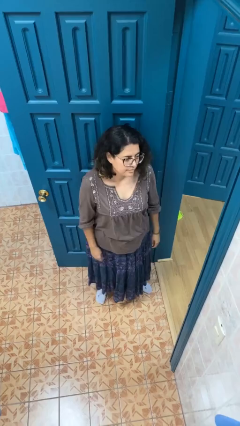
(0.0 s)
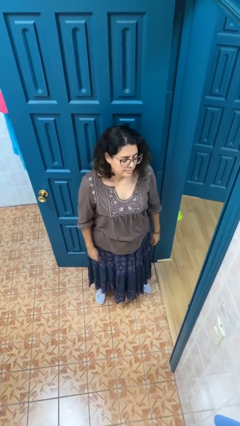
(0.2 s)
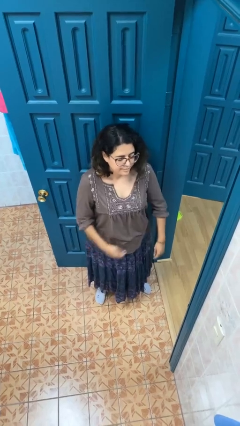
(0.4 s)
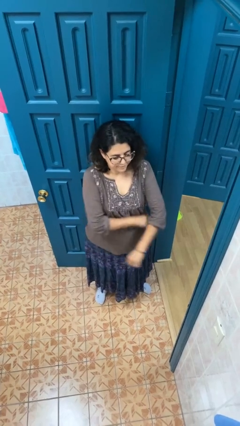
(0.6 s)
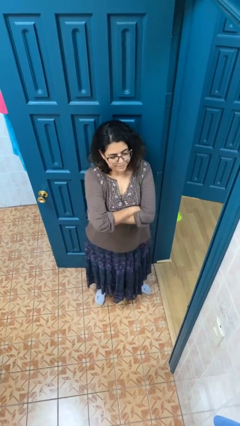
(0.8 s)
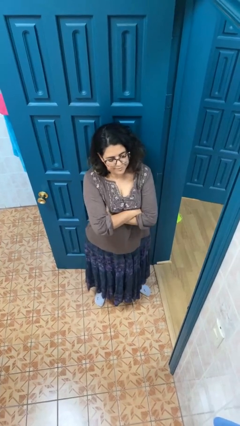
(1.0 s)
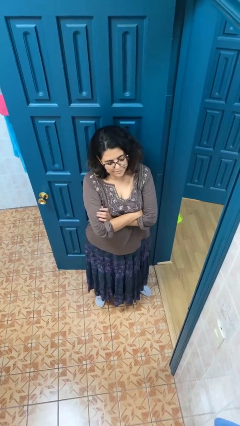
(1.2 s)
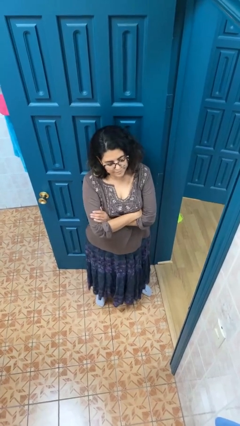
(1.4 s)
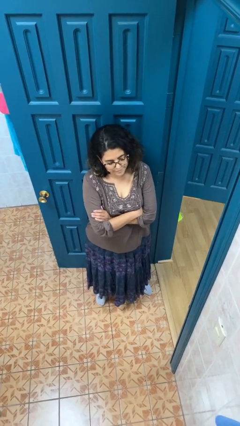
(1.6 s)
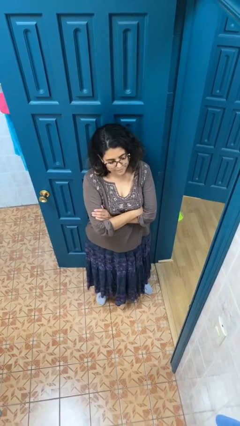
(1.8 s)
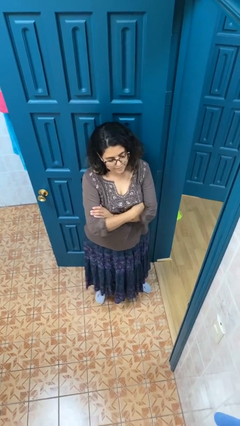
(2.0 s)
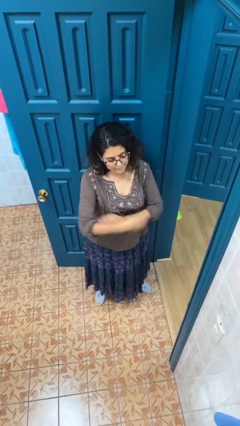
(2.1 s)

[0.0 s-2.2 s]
person crosses arms

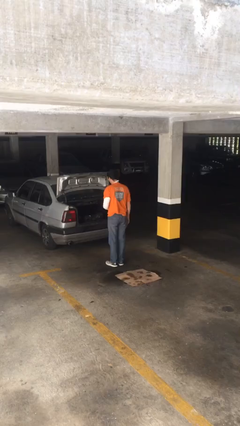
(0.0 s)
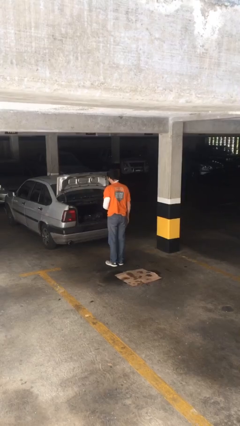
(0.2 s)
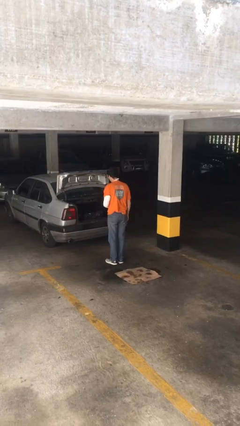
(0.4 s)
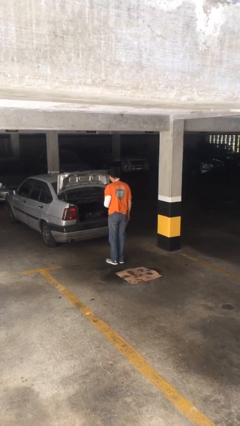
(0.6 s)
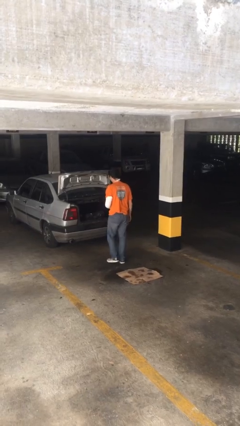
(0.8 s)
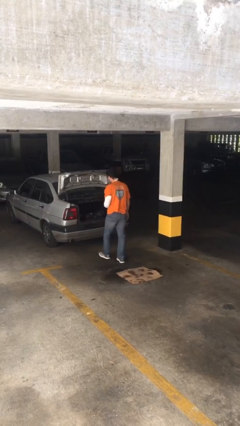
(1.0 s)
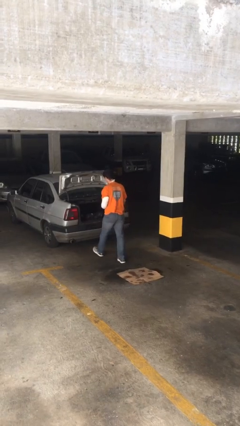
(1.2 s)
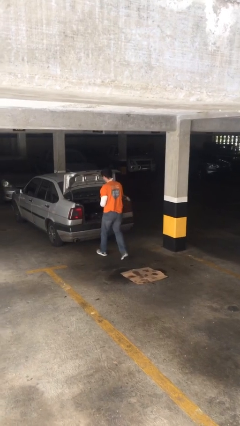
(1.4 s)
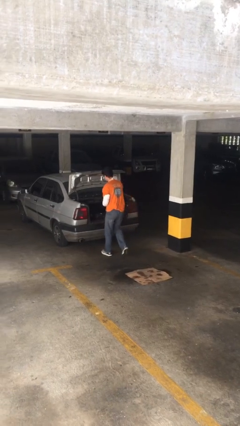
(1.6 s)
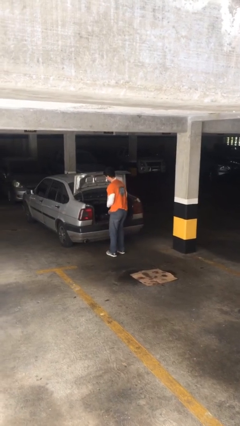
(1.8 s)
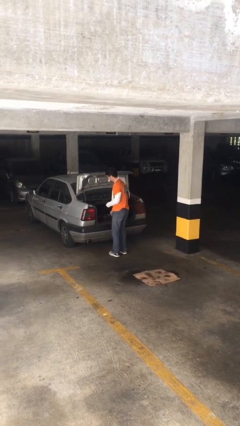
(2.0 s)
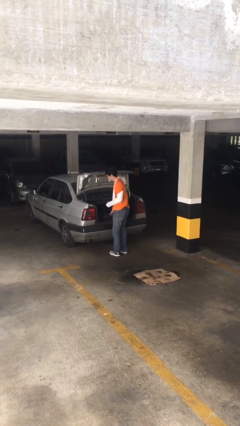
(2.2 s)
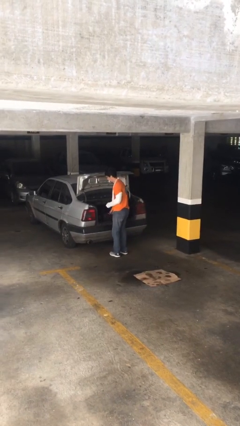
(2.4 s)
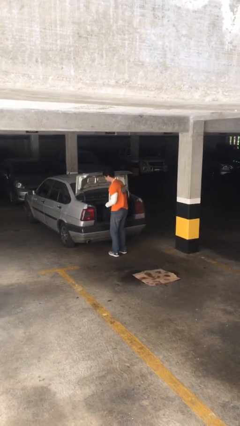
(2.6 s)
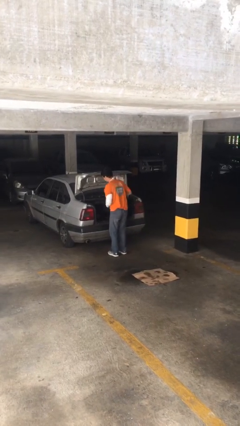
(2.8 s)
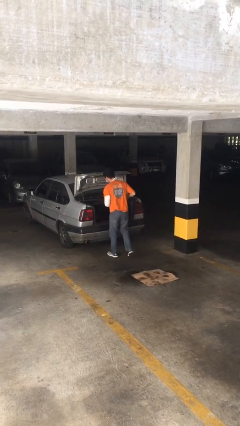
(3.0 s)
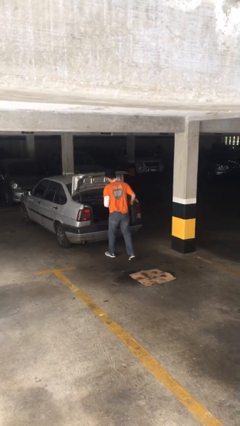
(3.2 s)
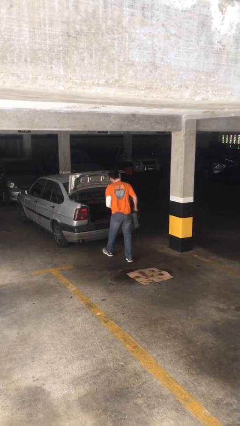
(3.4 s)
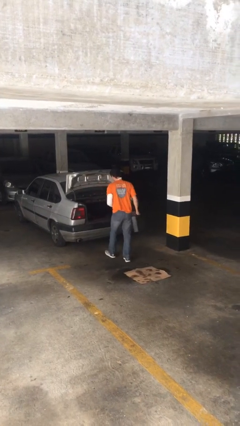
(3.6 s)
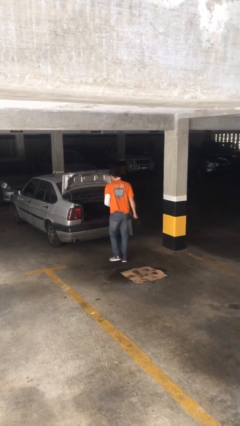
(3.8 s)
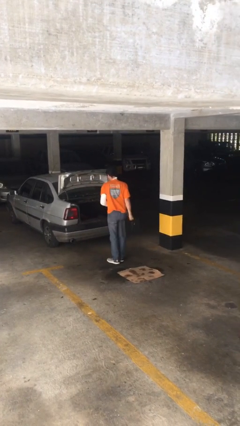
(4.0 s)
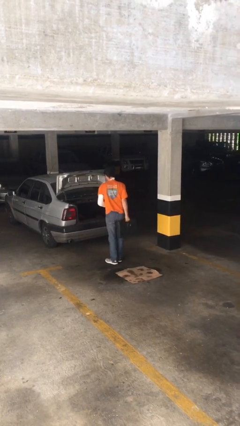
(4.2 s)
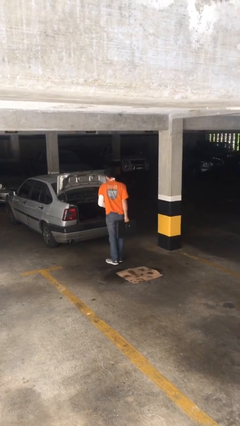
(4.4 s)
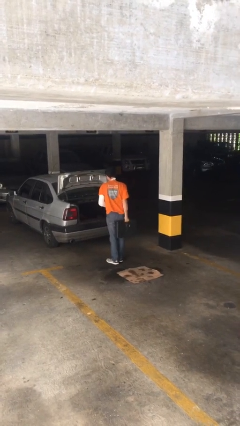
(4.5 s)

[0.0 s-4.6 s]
person unloads car

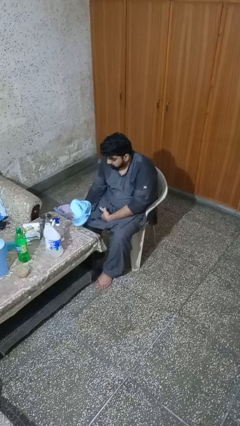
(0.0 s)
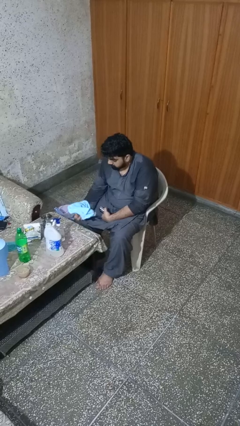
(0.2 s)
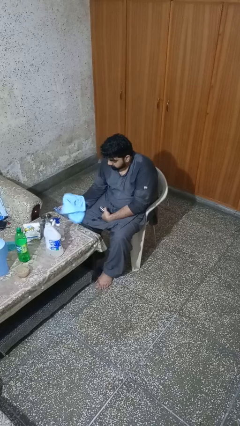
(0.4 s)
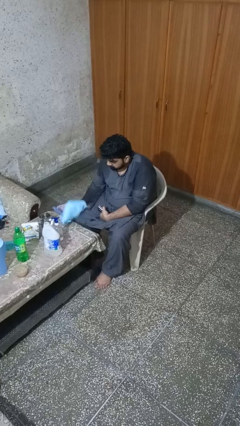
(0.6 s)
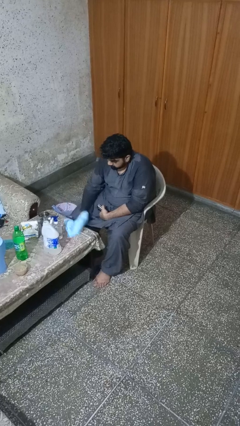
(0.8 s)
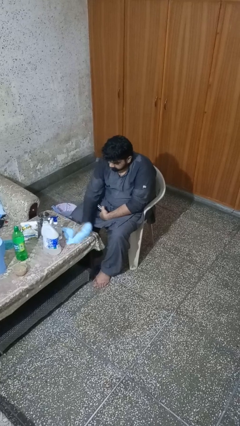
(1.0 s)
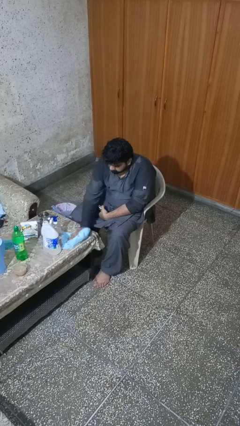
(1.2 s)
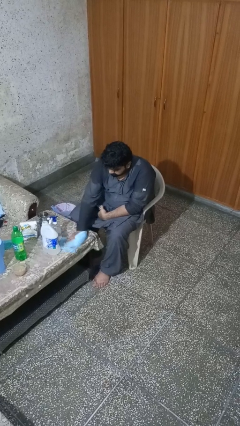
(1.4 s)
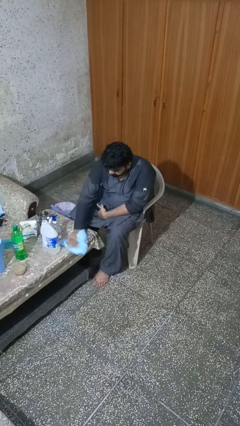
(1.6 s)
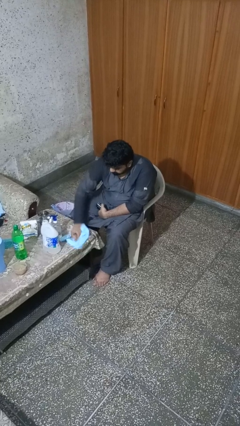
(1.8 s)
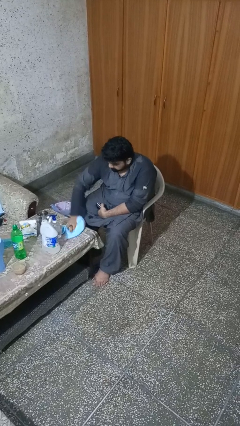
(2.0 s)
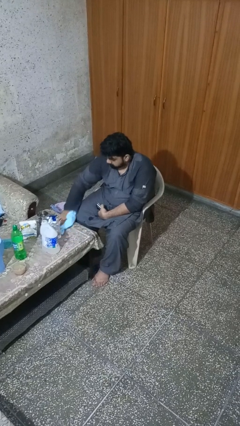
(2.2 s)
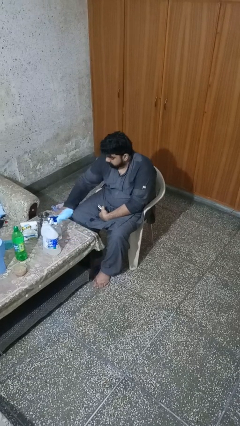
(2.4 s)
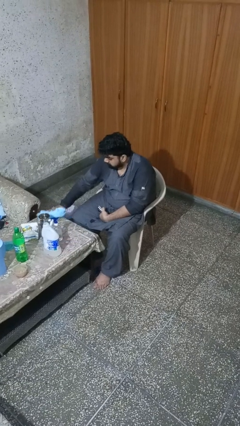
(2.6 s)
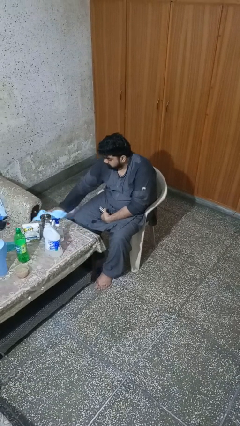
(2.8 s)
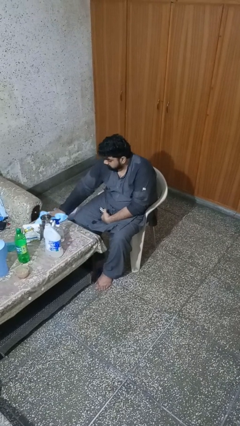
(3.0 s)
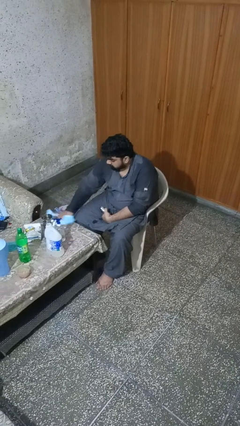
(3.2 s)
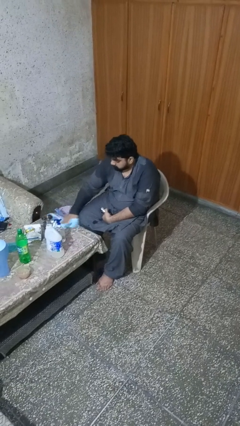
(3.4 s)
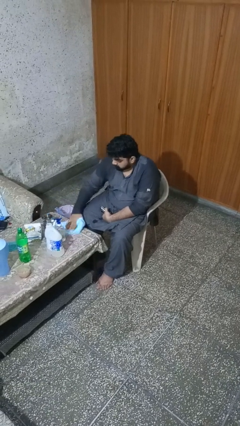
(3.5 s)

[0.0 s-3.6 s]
person cleans table with rag

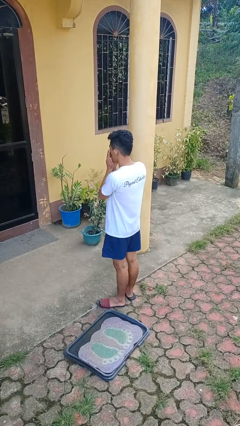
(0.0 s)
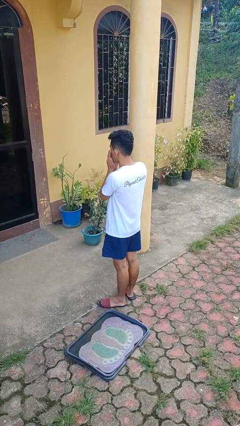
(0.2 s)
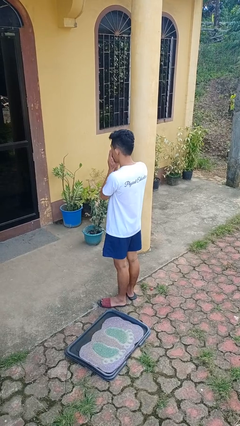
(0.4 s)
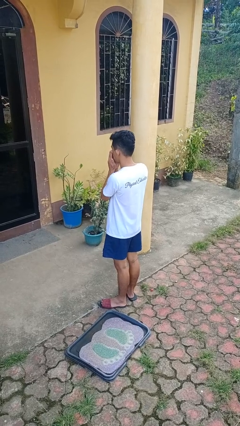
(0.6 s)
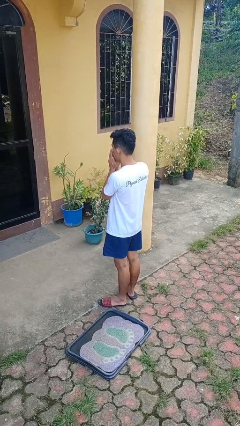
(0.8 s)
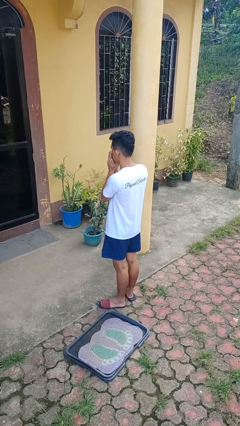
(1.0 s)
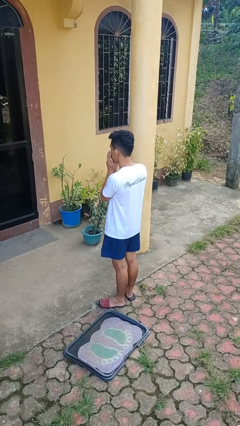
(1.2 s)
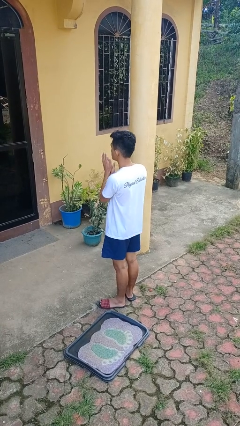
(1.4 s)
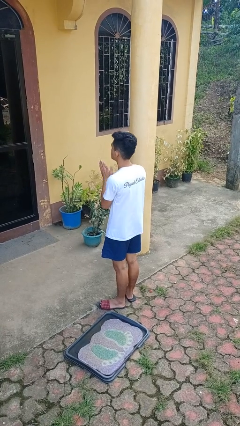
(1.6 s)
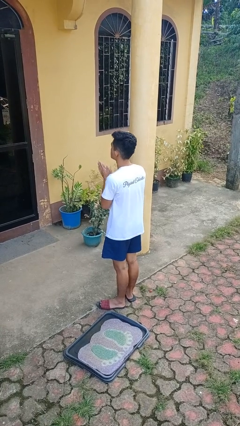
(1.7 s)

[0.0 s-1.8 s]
person blows into hands

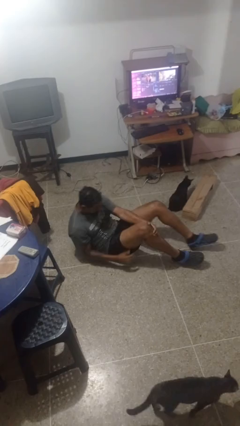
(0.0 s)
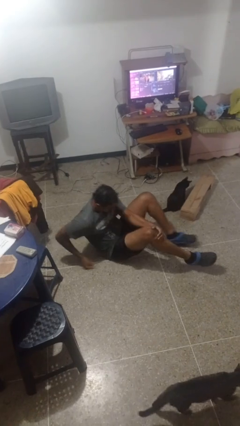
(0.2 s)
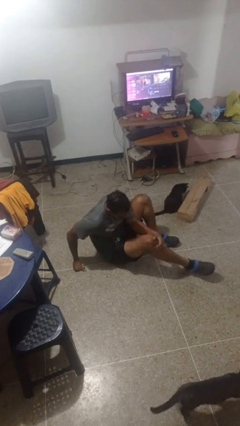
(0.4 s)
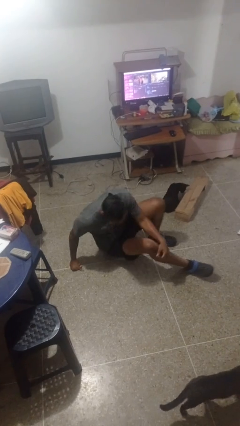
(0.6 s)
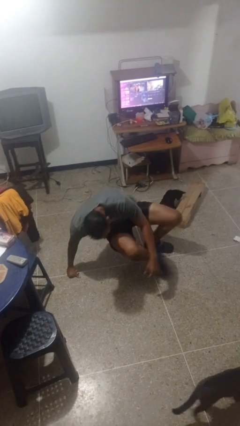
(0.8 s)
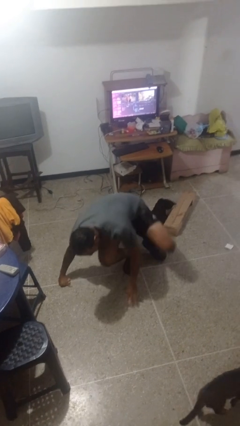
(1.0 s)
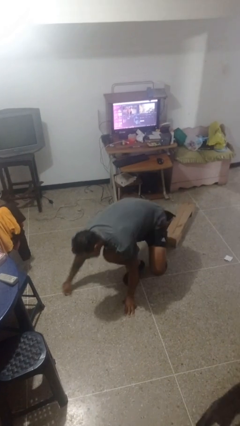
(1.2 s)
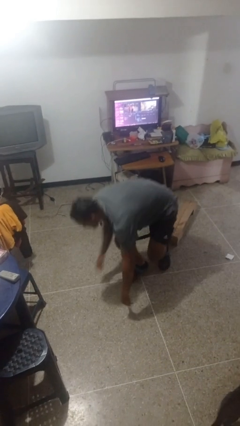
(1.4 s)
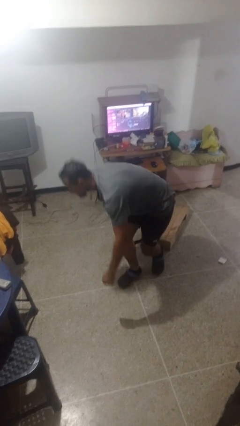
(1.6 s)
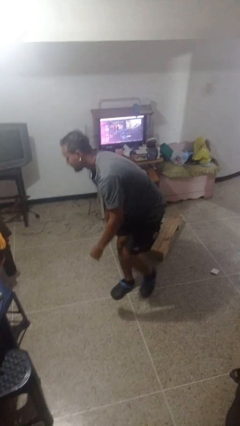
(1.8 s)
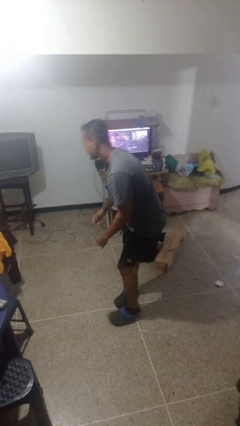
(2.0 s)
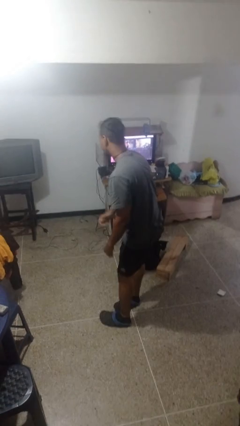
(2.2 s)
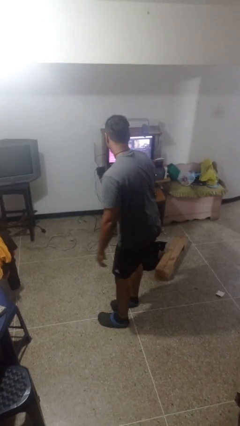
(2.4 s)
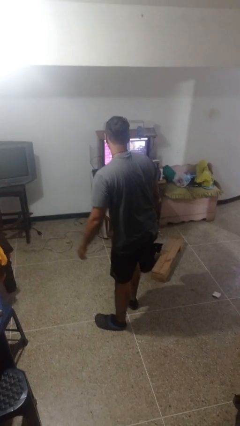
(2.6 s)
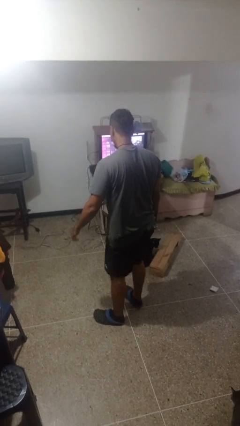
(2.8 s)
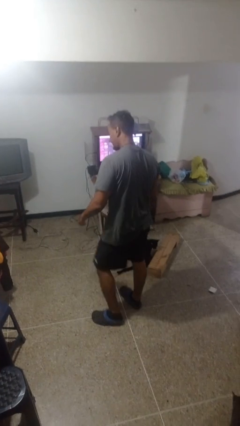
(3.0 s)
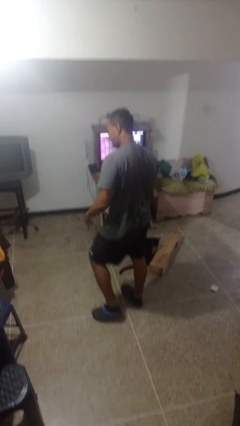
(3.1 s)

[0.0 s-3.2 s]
person stands up from floor

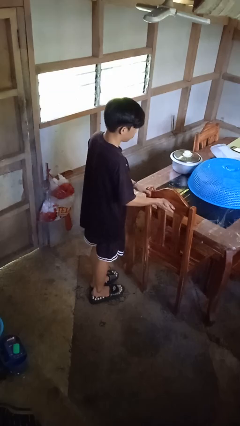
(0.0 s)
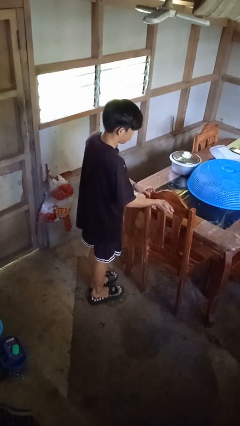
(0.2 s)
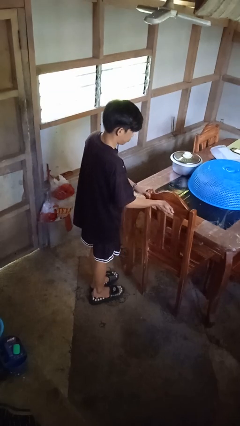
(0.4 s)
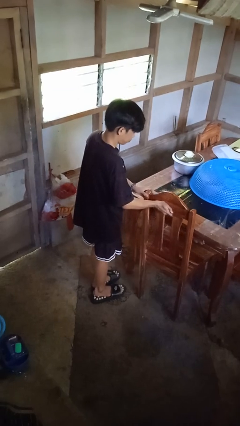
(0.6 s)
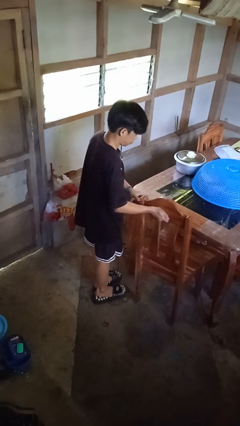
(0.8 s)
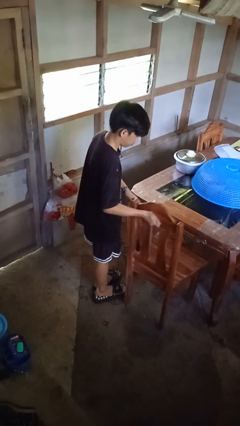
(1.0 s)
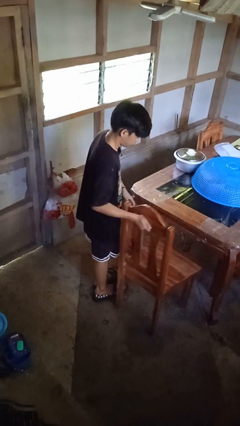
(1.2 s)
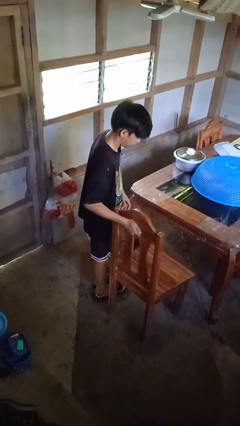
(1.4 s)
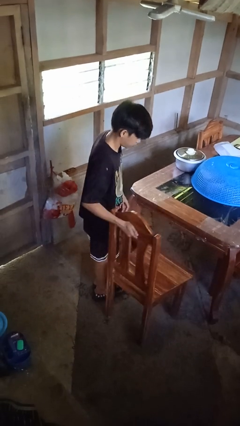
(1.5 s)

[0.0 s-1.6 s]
person pulls out chair

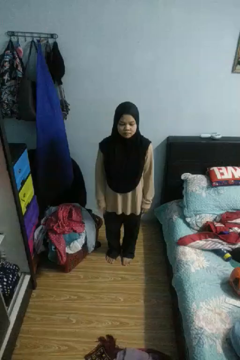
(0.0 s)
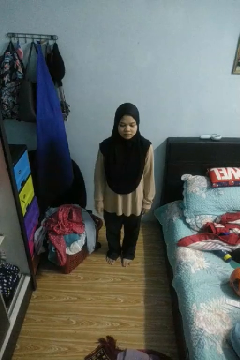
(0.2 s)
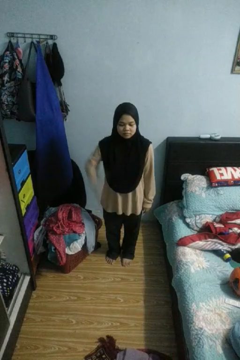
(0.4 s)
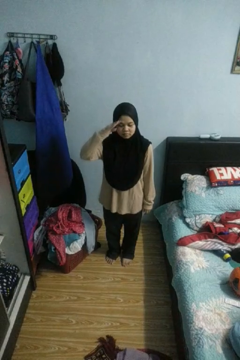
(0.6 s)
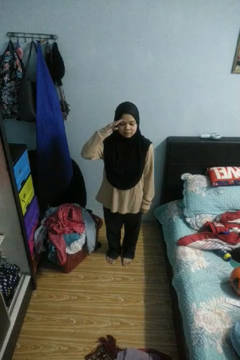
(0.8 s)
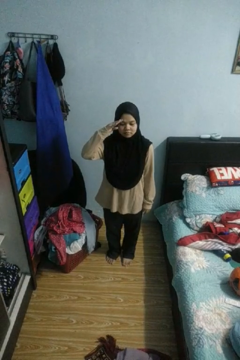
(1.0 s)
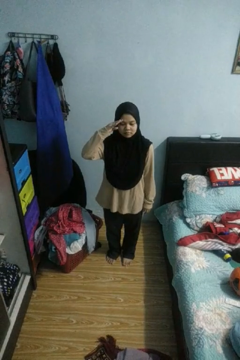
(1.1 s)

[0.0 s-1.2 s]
person salutes
